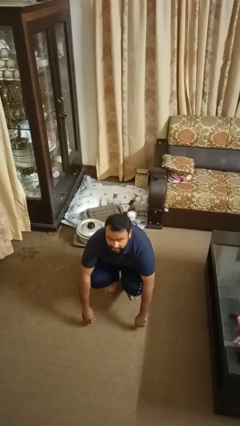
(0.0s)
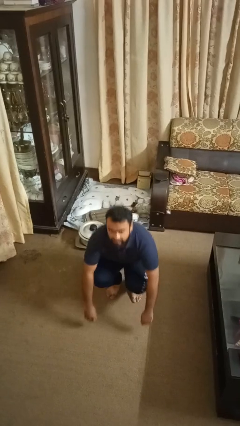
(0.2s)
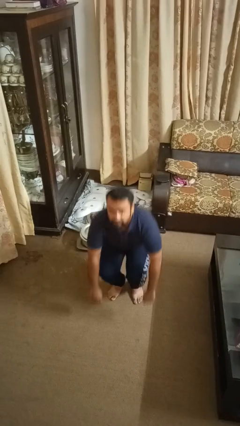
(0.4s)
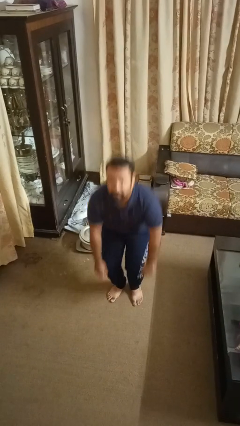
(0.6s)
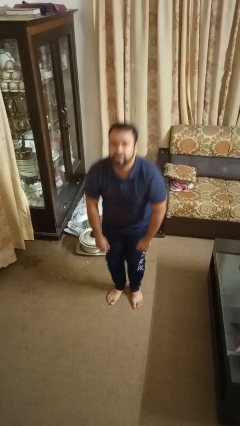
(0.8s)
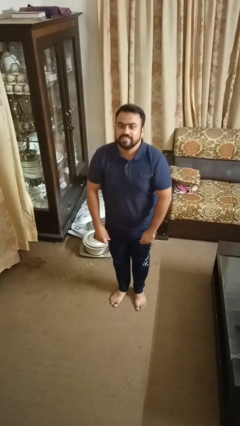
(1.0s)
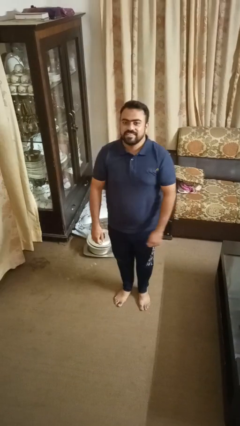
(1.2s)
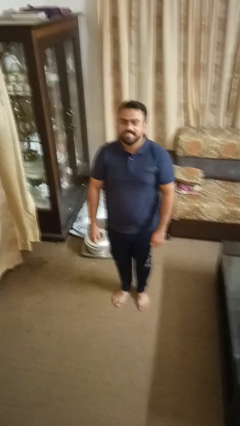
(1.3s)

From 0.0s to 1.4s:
person stands up

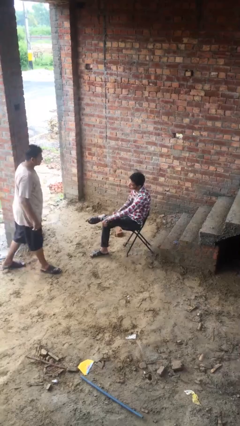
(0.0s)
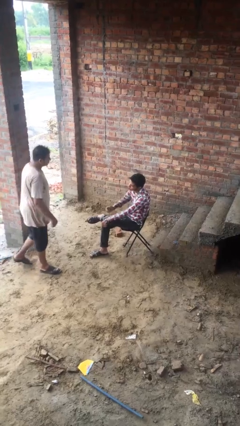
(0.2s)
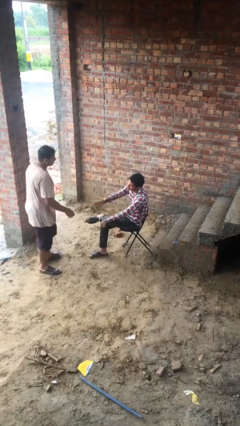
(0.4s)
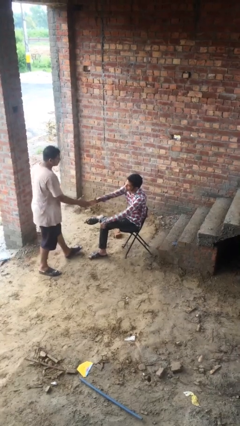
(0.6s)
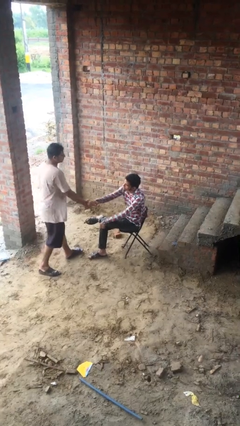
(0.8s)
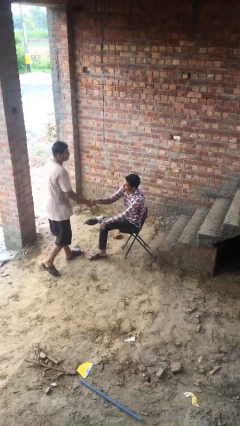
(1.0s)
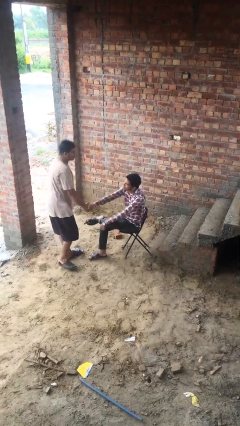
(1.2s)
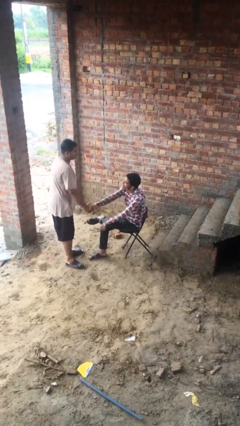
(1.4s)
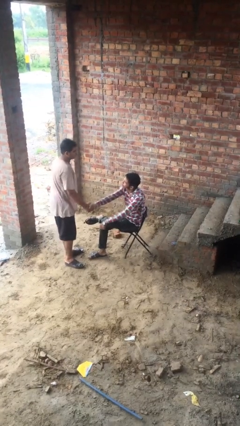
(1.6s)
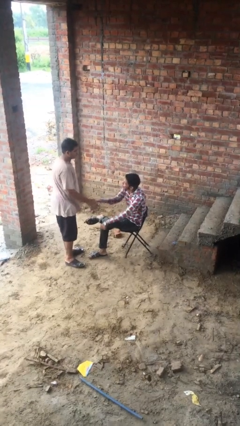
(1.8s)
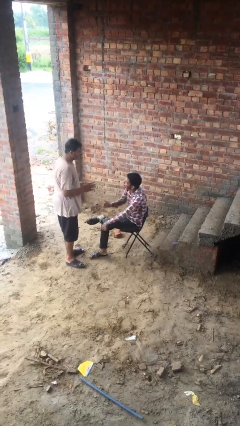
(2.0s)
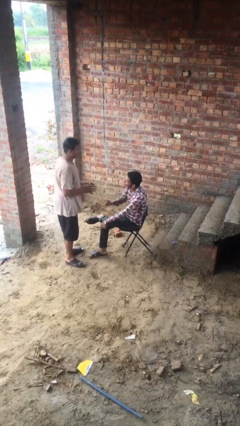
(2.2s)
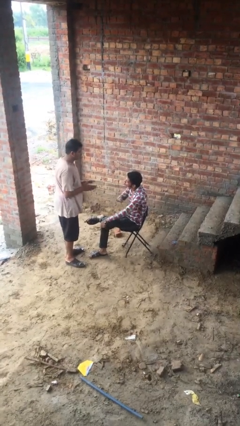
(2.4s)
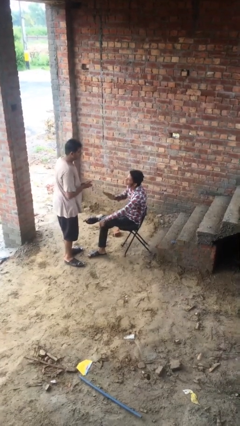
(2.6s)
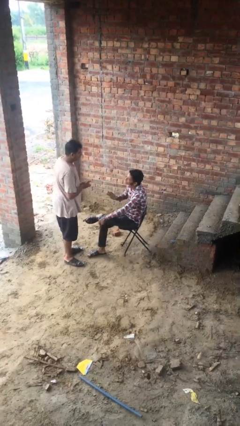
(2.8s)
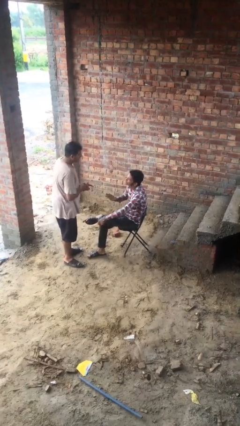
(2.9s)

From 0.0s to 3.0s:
person shakes hand

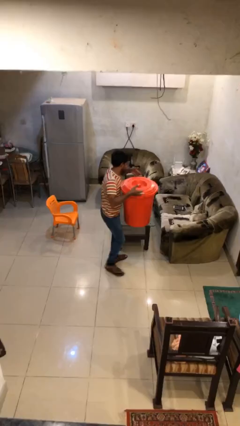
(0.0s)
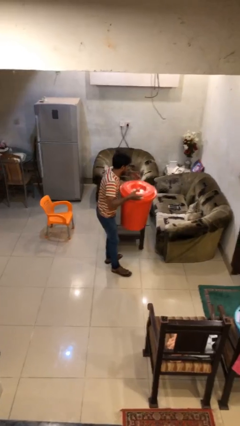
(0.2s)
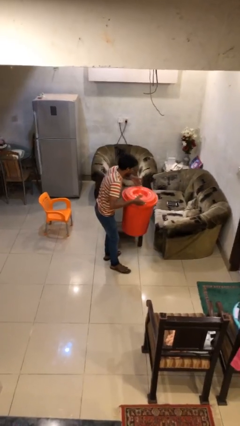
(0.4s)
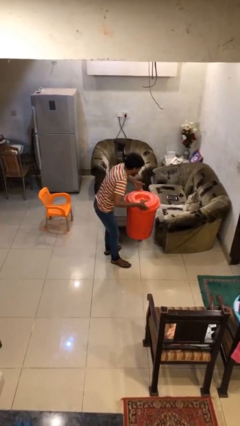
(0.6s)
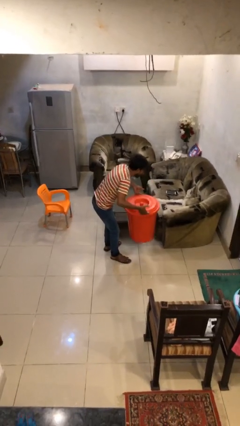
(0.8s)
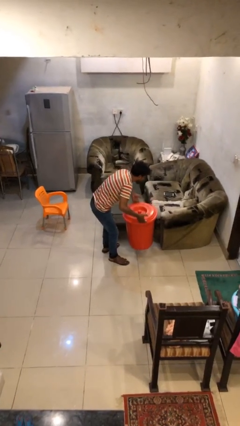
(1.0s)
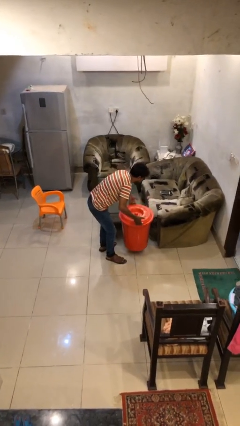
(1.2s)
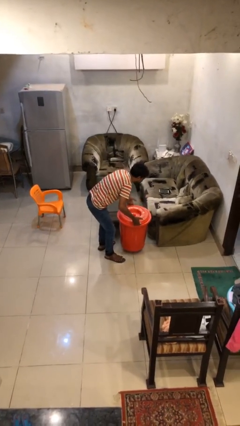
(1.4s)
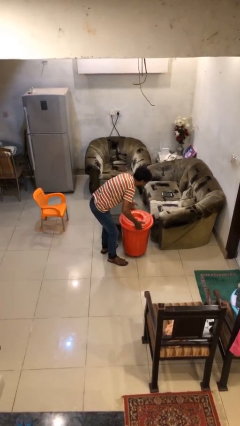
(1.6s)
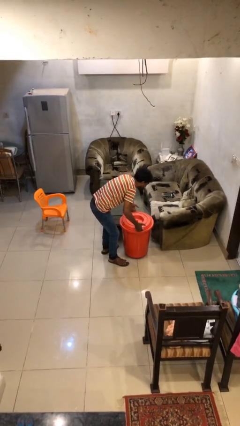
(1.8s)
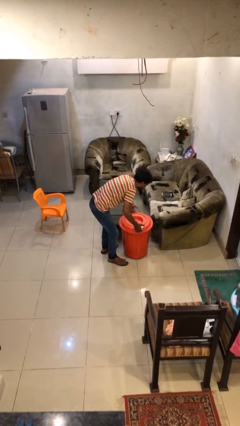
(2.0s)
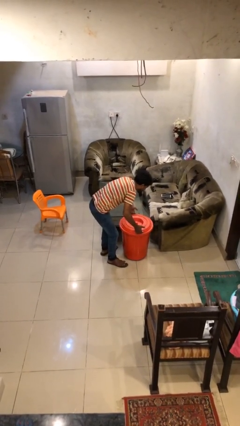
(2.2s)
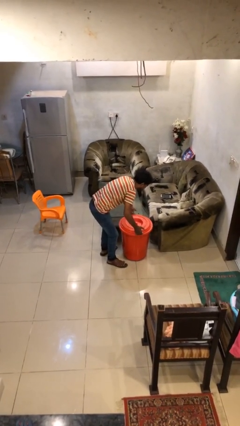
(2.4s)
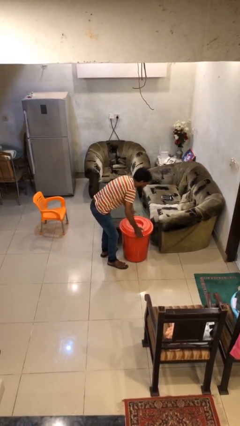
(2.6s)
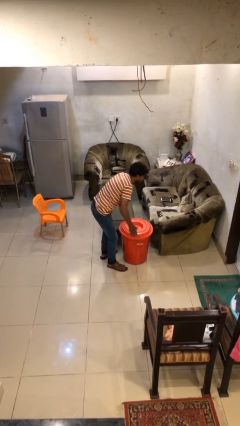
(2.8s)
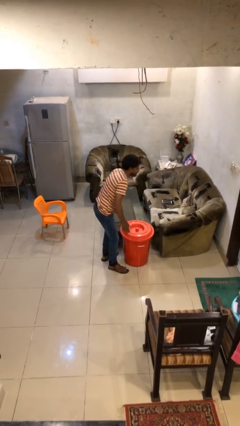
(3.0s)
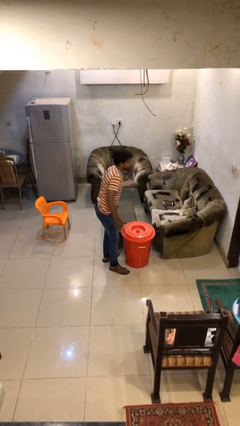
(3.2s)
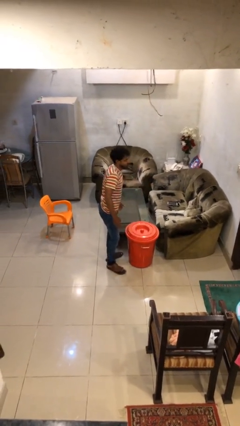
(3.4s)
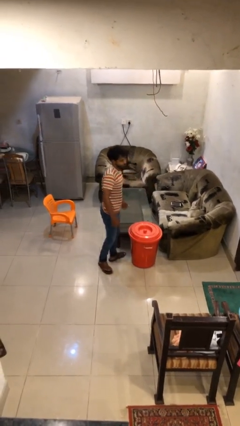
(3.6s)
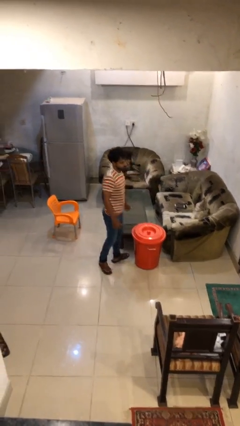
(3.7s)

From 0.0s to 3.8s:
person puts down object on floor

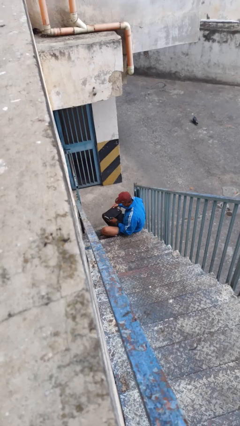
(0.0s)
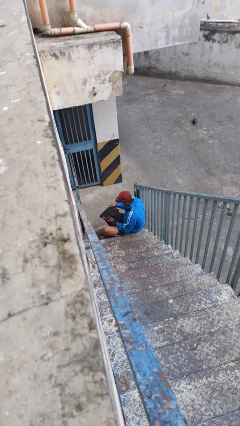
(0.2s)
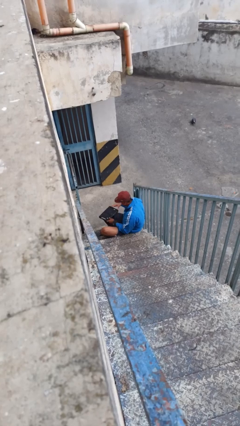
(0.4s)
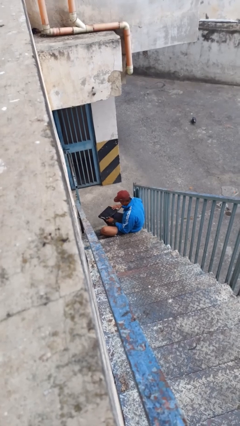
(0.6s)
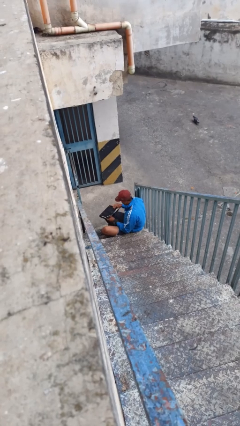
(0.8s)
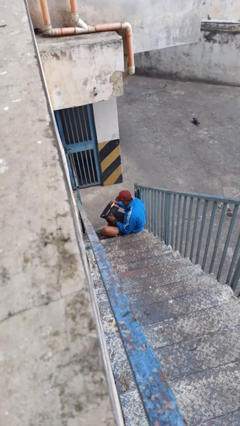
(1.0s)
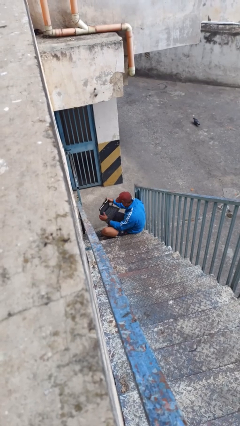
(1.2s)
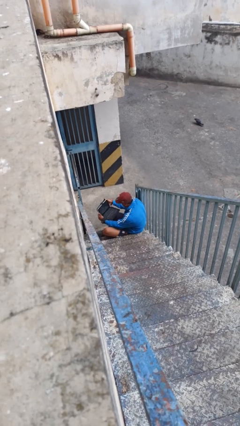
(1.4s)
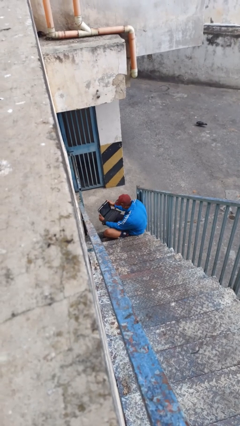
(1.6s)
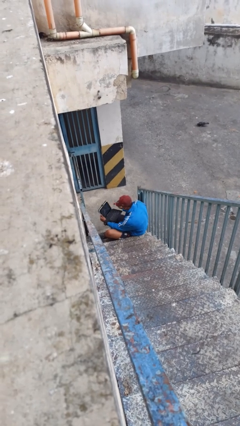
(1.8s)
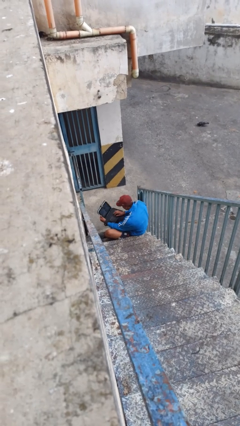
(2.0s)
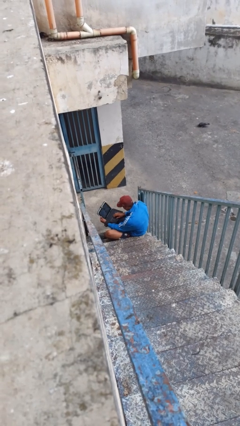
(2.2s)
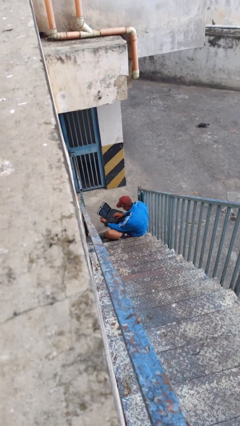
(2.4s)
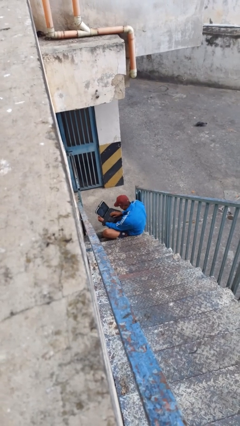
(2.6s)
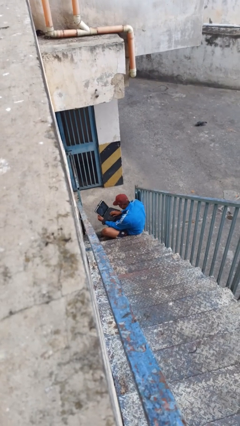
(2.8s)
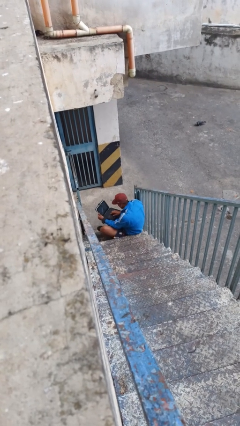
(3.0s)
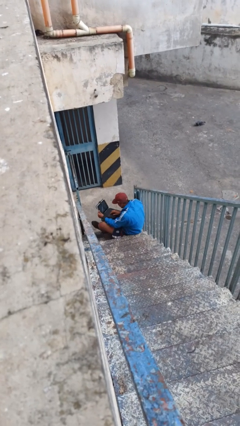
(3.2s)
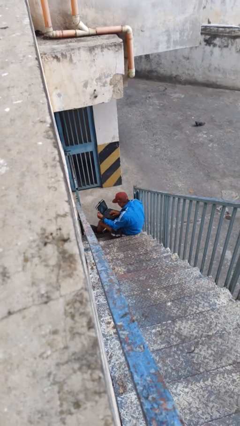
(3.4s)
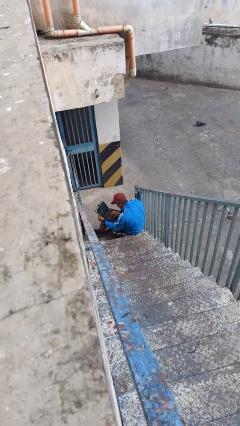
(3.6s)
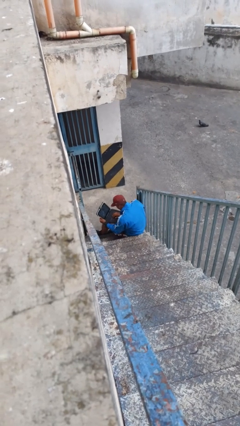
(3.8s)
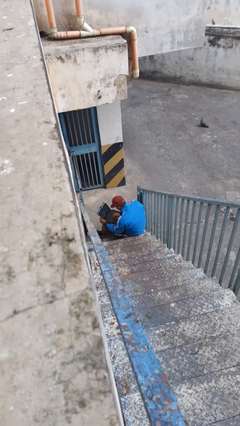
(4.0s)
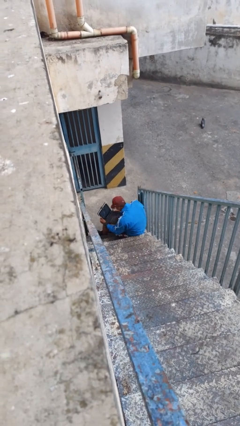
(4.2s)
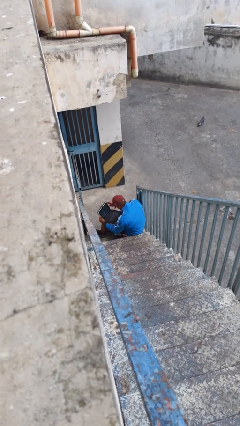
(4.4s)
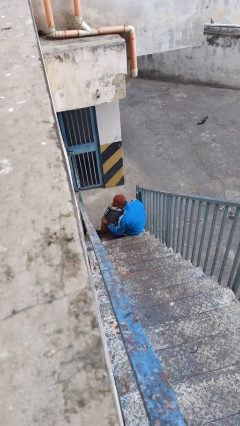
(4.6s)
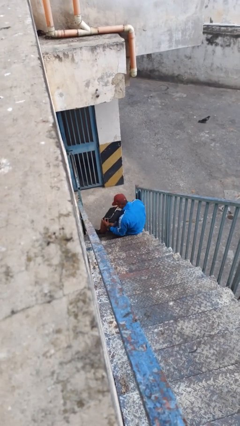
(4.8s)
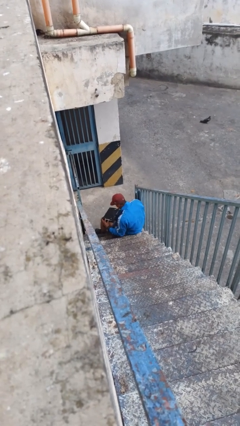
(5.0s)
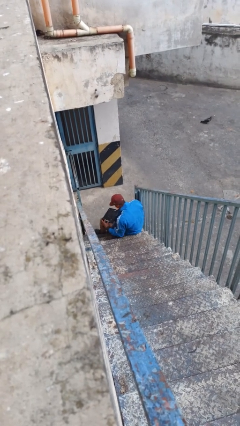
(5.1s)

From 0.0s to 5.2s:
person interacts with laptop

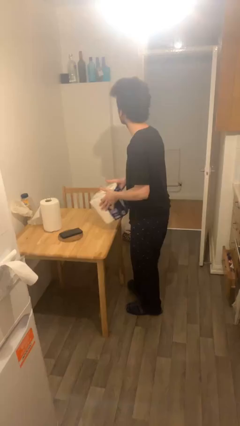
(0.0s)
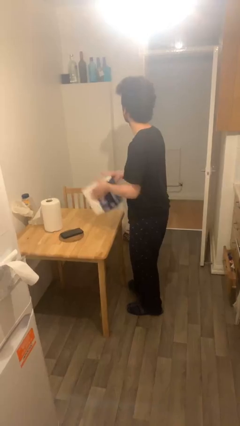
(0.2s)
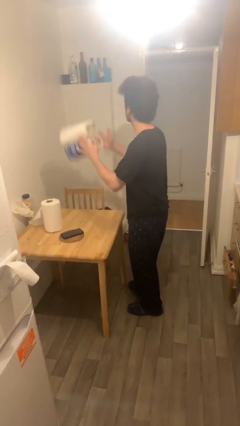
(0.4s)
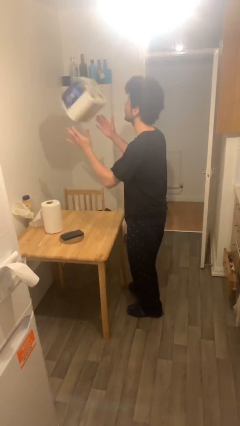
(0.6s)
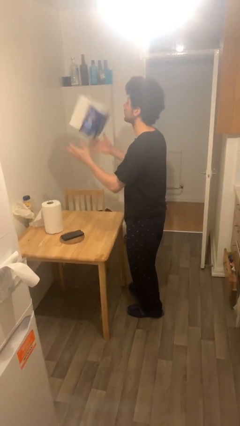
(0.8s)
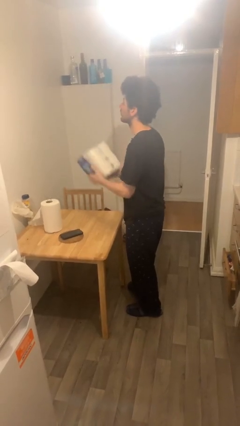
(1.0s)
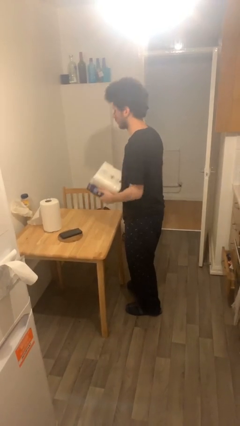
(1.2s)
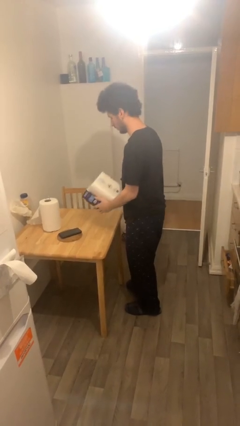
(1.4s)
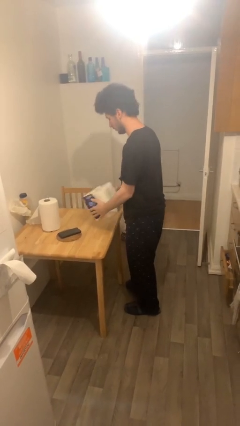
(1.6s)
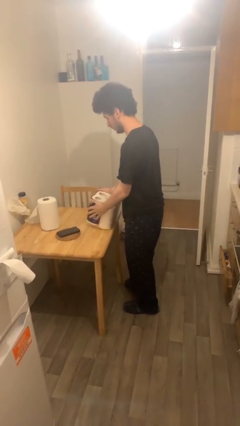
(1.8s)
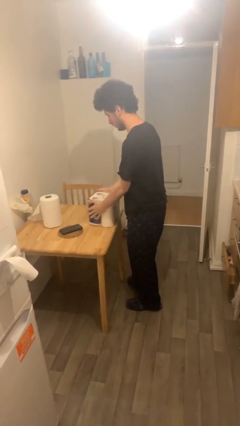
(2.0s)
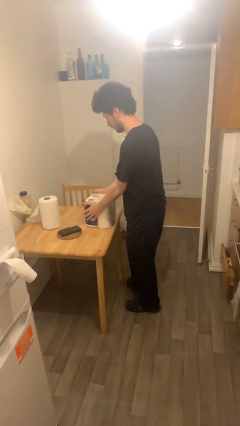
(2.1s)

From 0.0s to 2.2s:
person puts down object on table

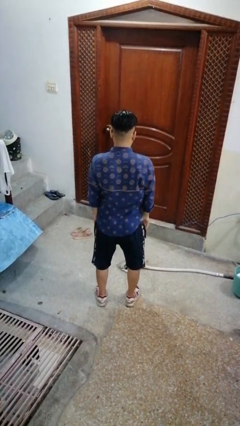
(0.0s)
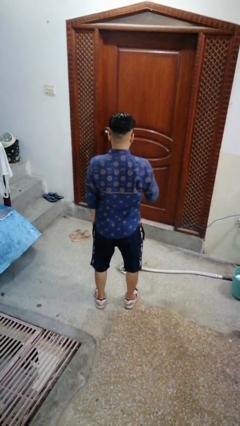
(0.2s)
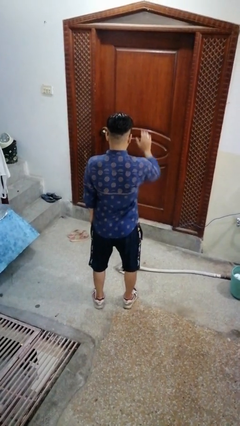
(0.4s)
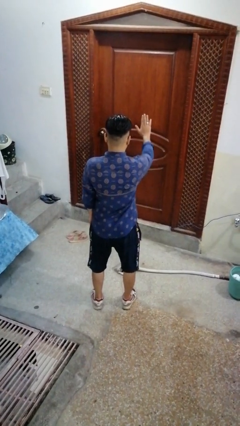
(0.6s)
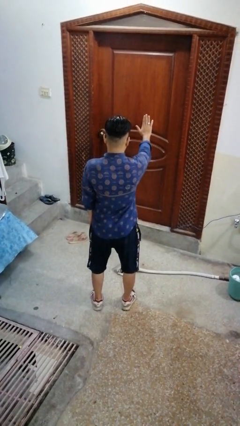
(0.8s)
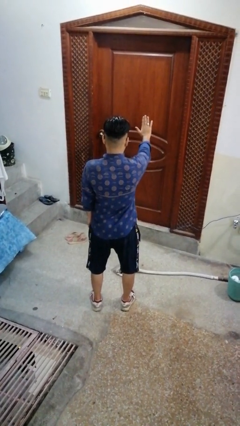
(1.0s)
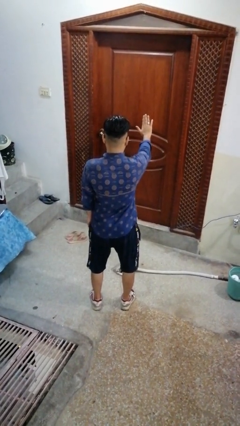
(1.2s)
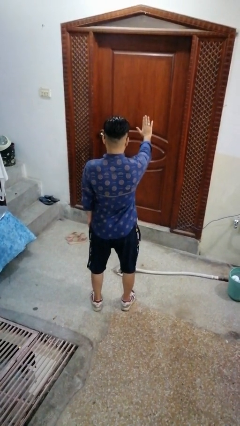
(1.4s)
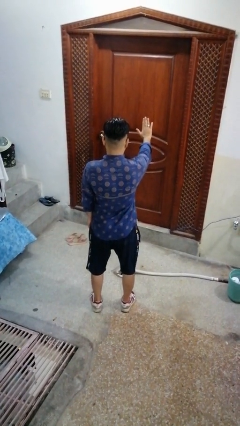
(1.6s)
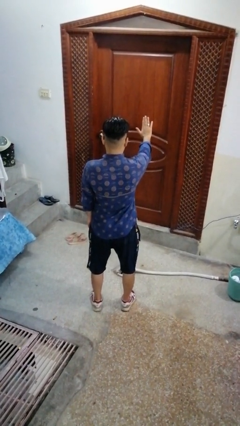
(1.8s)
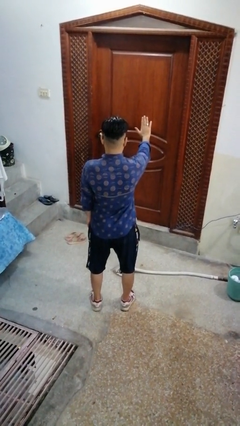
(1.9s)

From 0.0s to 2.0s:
person gestures stop
